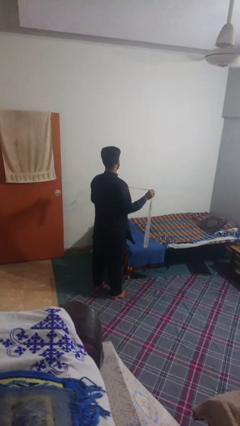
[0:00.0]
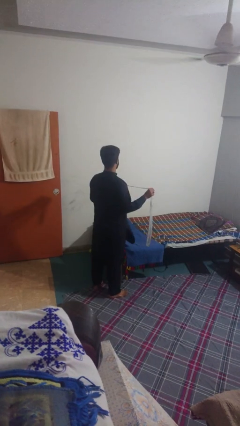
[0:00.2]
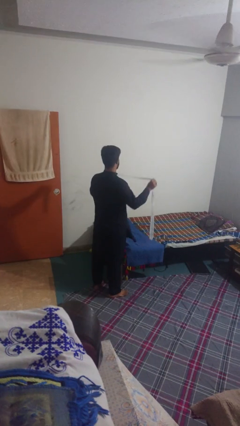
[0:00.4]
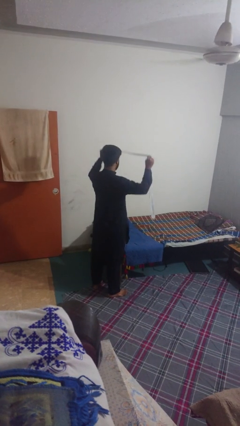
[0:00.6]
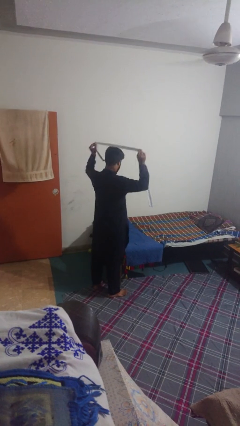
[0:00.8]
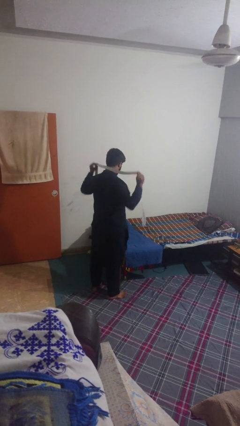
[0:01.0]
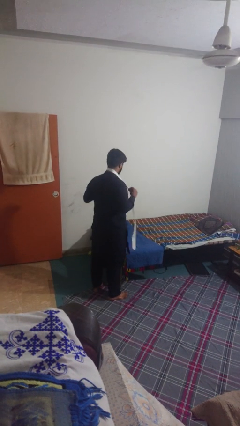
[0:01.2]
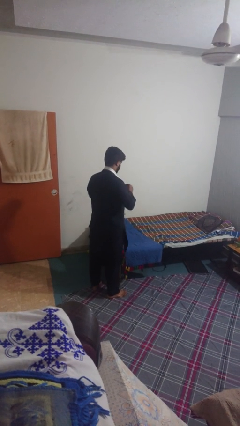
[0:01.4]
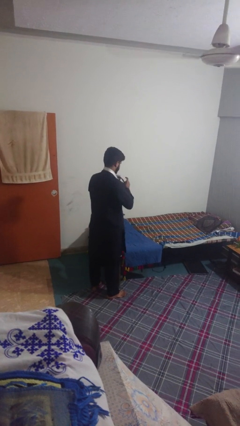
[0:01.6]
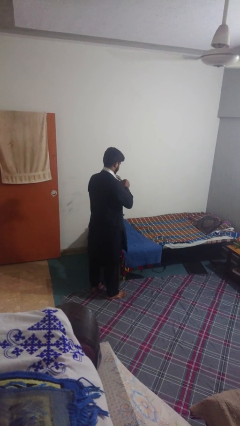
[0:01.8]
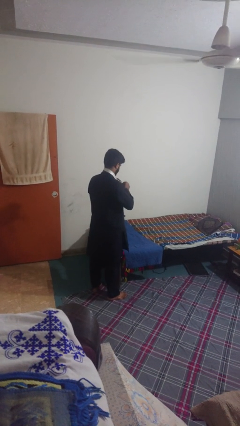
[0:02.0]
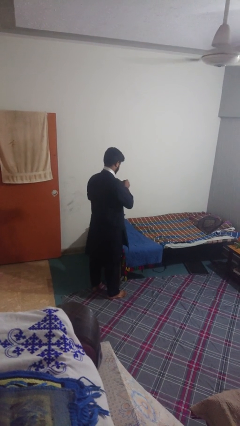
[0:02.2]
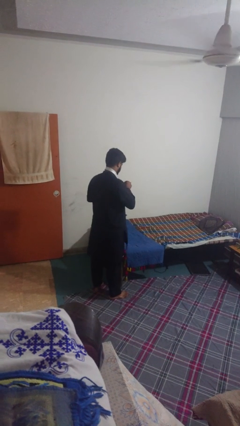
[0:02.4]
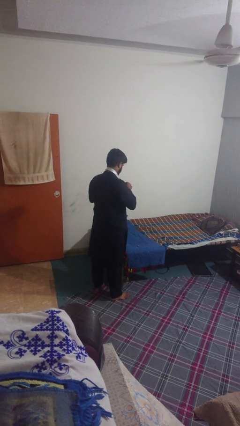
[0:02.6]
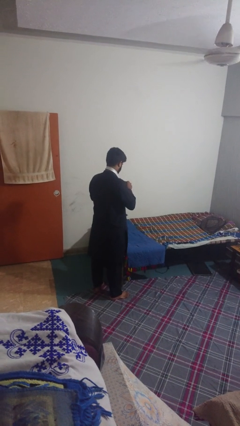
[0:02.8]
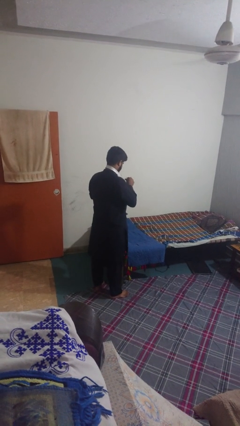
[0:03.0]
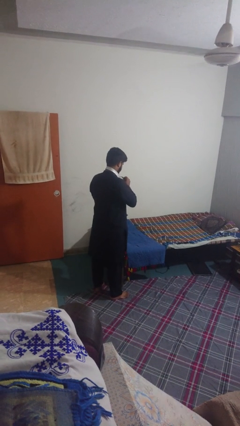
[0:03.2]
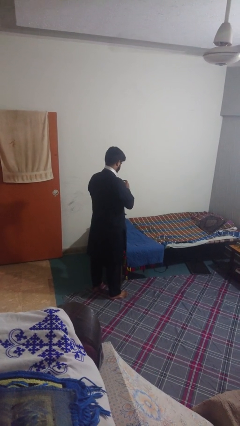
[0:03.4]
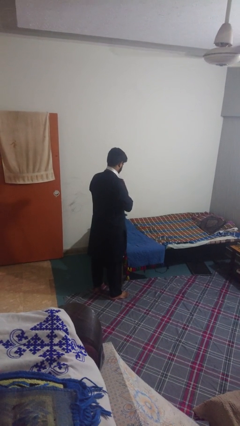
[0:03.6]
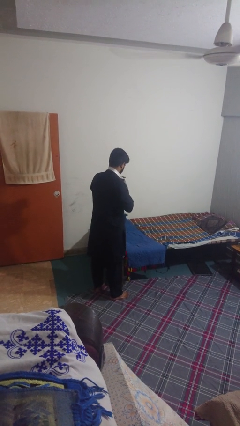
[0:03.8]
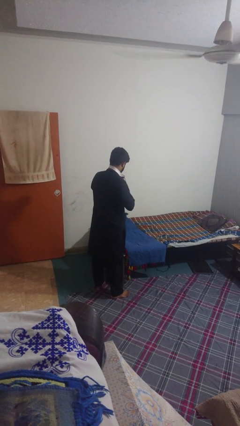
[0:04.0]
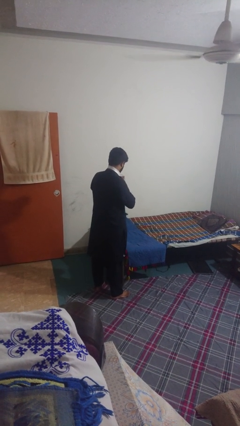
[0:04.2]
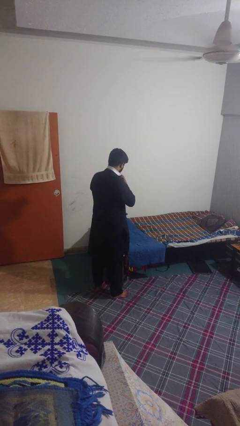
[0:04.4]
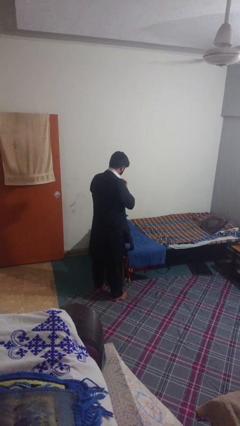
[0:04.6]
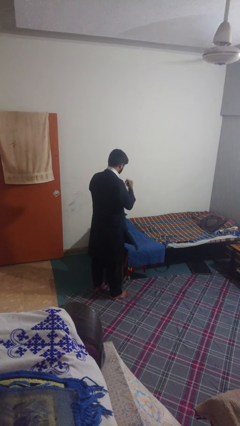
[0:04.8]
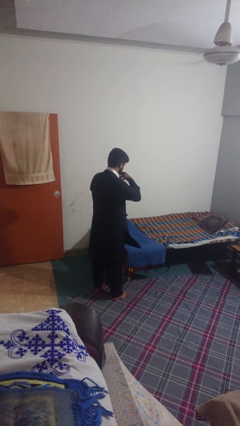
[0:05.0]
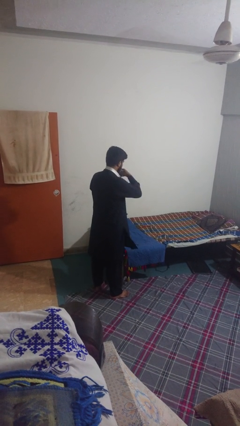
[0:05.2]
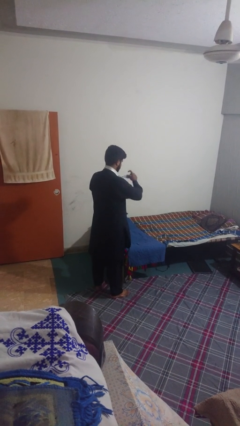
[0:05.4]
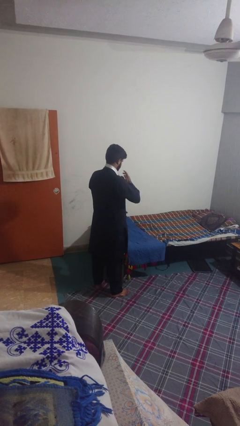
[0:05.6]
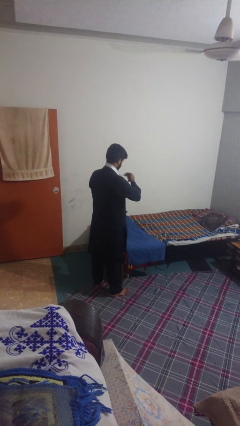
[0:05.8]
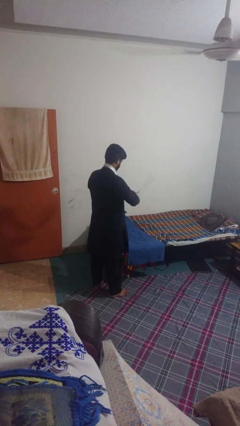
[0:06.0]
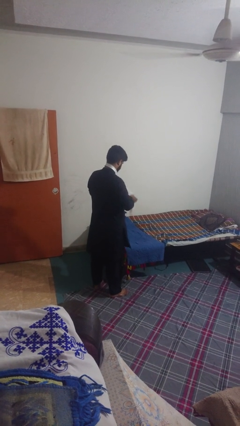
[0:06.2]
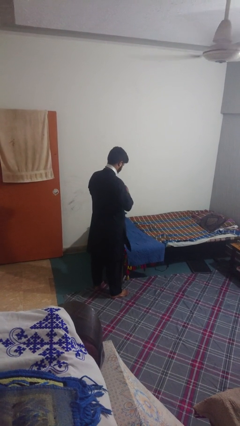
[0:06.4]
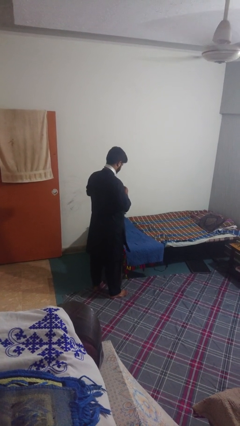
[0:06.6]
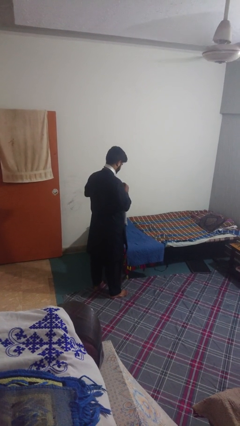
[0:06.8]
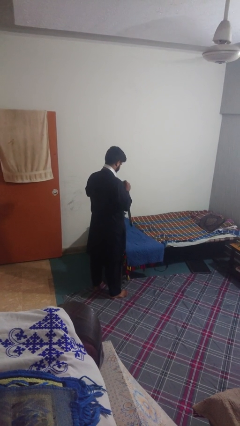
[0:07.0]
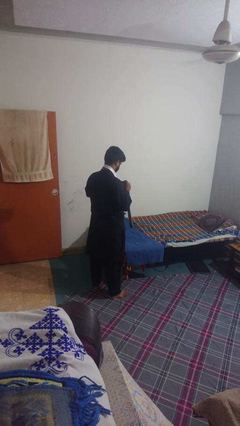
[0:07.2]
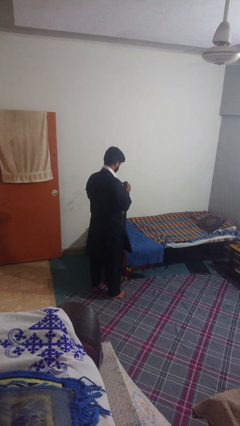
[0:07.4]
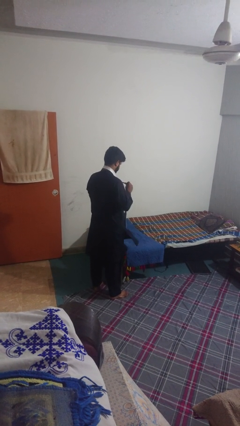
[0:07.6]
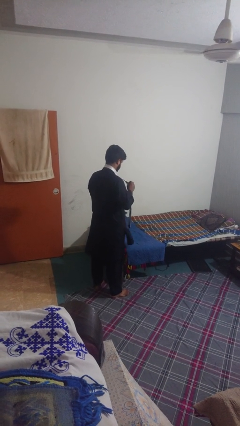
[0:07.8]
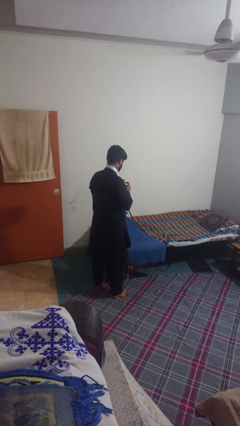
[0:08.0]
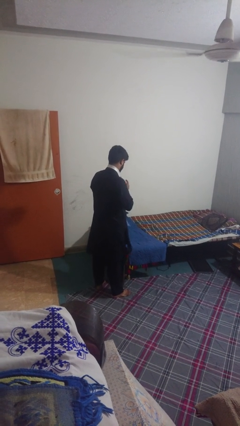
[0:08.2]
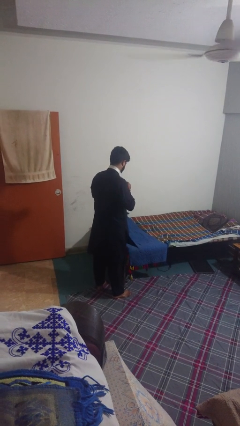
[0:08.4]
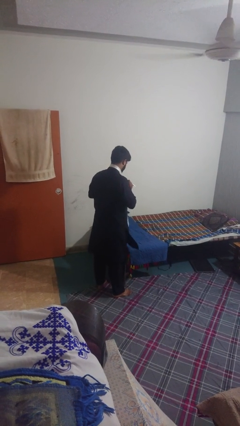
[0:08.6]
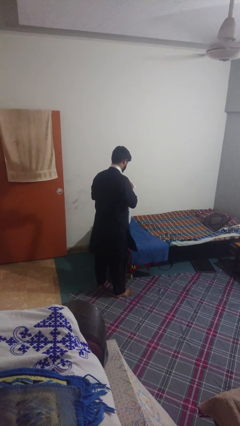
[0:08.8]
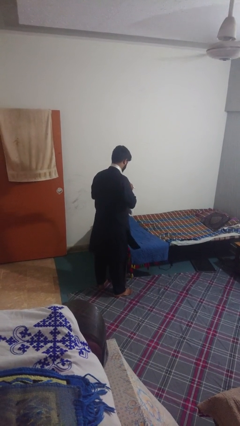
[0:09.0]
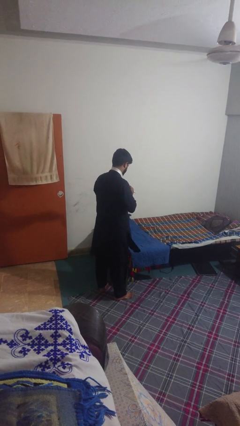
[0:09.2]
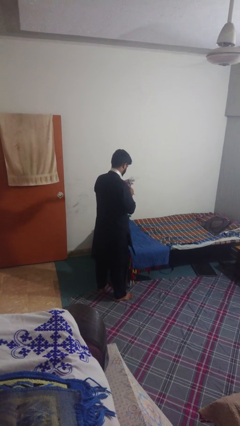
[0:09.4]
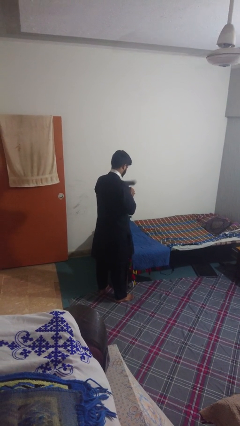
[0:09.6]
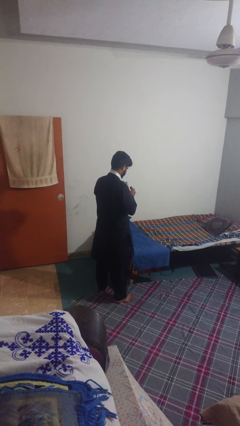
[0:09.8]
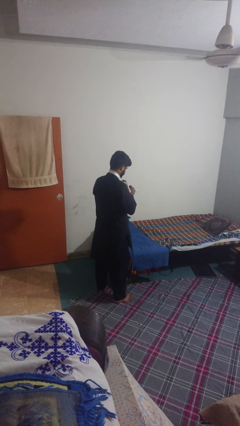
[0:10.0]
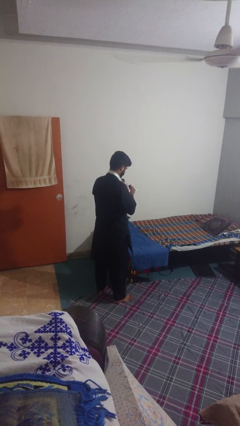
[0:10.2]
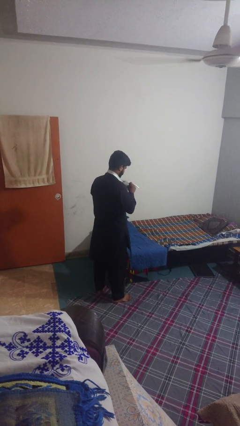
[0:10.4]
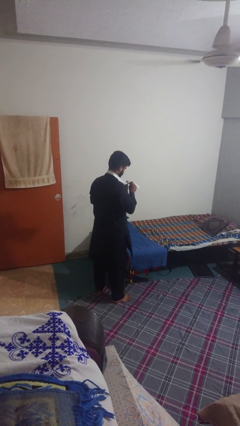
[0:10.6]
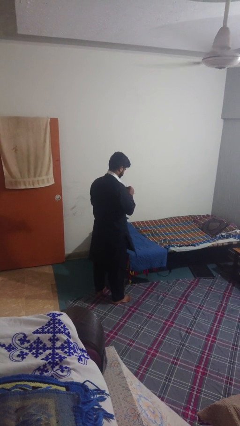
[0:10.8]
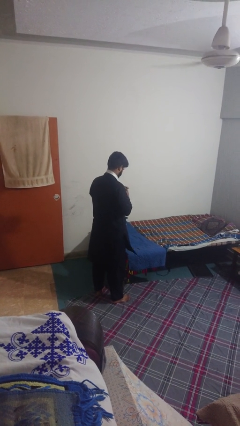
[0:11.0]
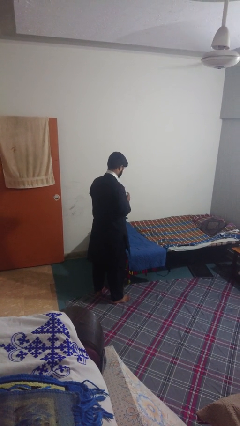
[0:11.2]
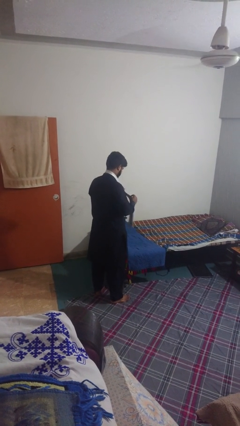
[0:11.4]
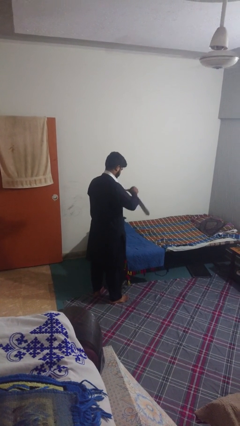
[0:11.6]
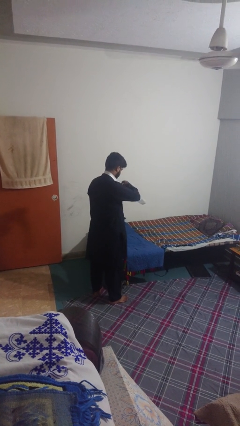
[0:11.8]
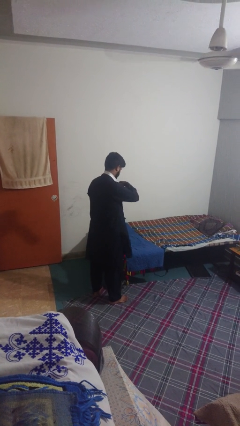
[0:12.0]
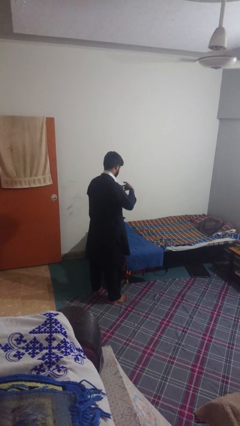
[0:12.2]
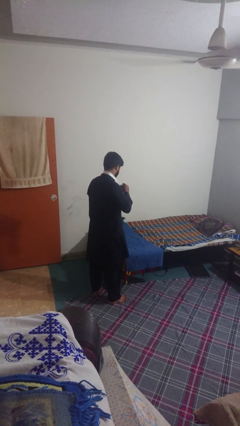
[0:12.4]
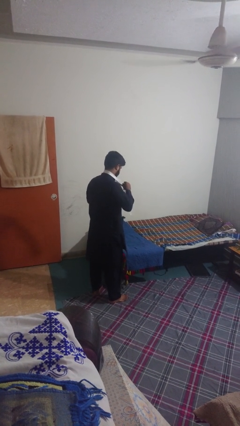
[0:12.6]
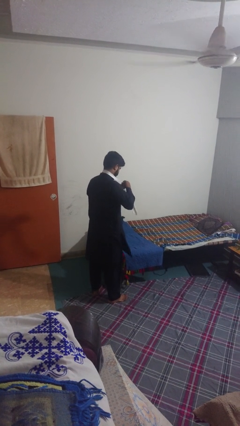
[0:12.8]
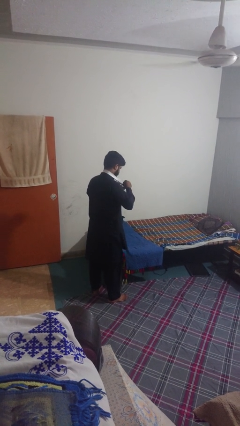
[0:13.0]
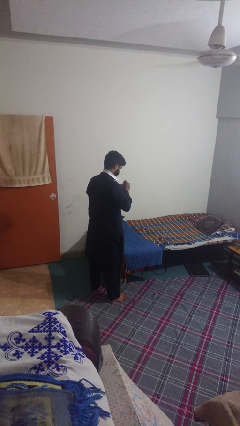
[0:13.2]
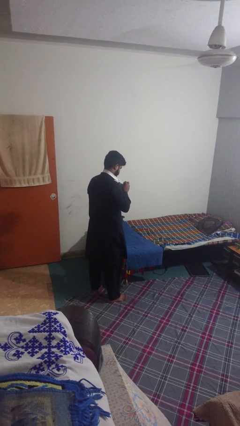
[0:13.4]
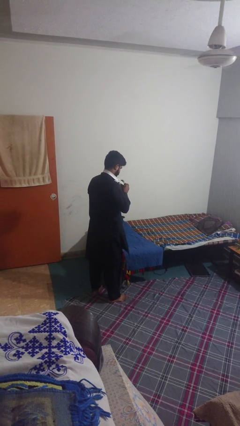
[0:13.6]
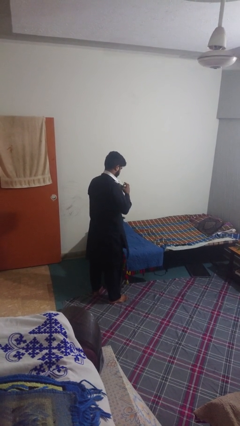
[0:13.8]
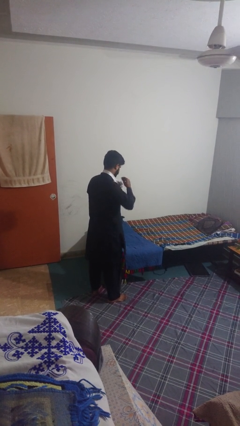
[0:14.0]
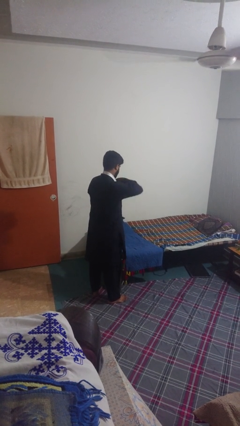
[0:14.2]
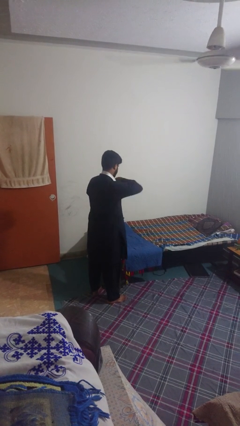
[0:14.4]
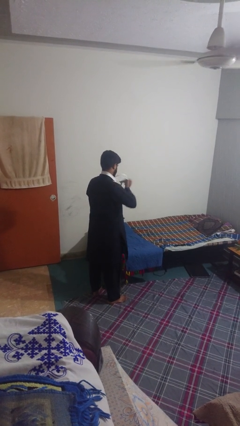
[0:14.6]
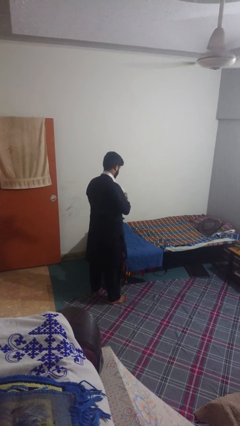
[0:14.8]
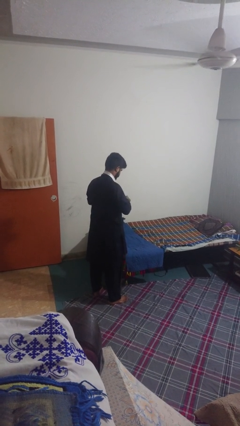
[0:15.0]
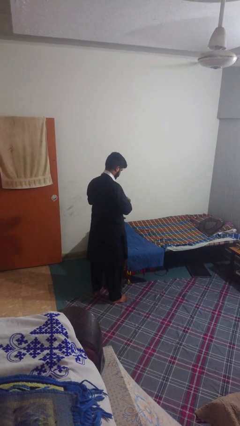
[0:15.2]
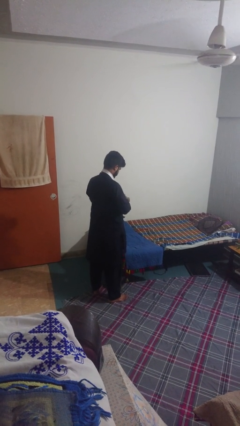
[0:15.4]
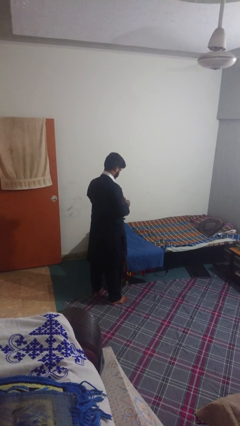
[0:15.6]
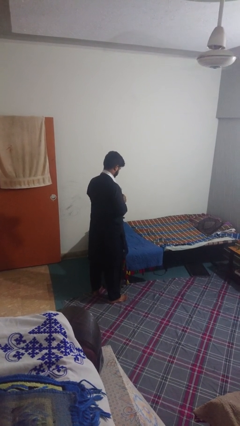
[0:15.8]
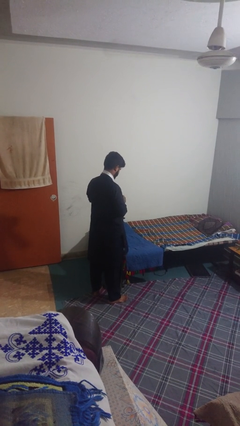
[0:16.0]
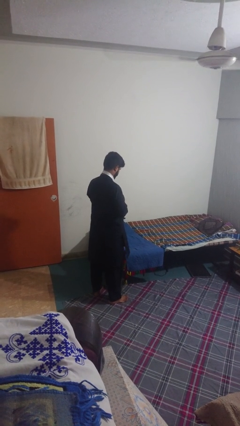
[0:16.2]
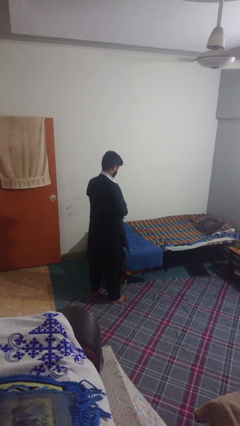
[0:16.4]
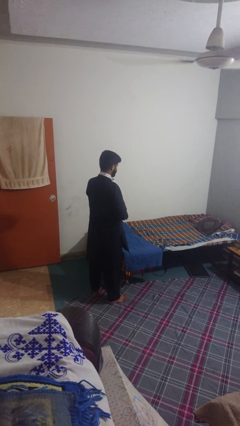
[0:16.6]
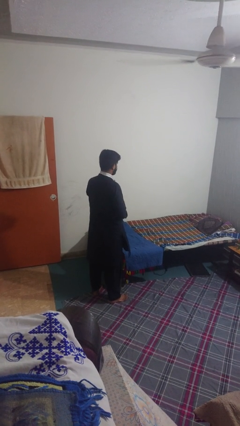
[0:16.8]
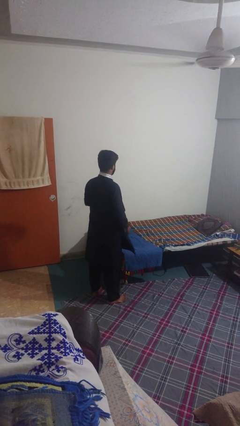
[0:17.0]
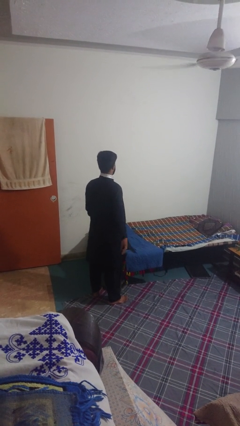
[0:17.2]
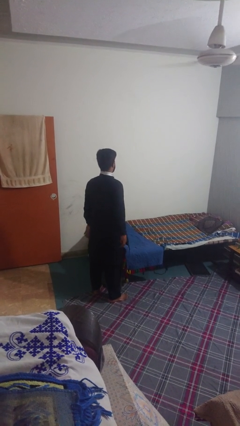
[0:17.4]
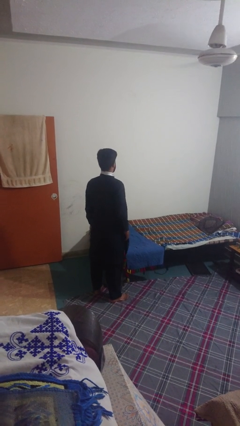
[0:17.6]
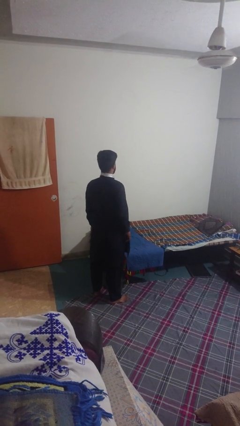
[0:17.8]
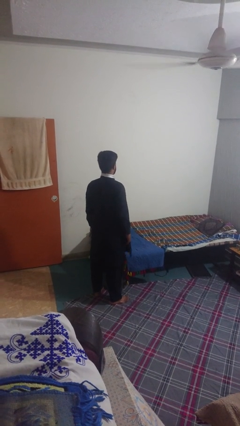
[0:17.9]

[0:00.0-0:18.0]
person puts on necktie
